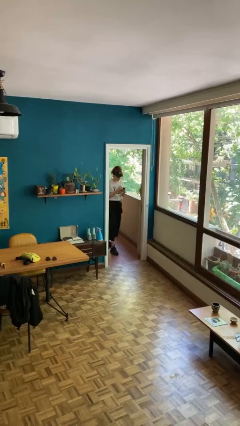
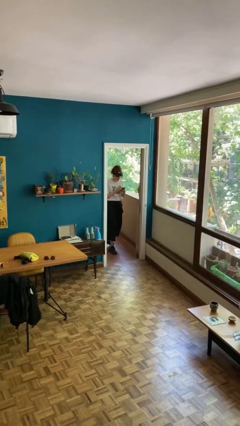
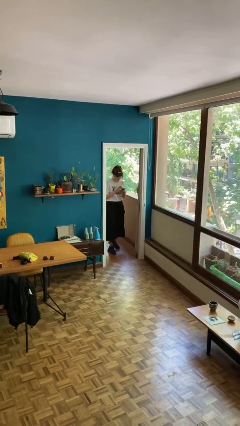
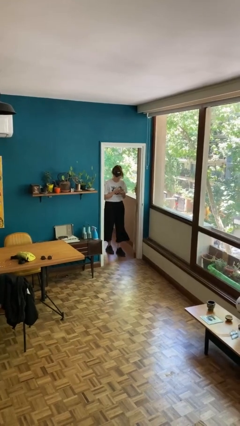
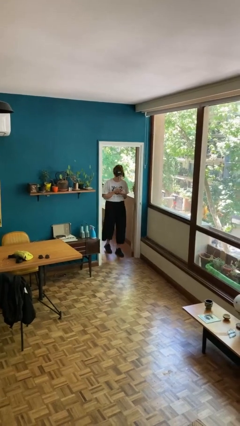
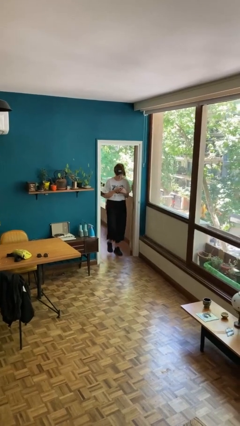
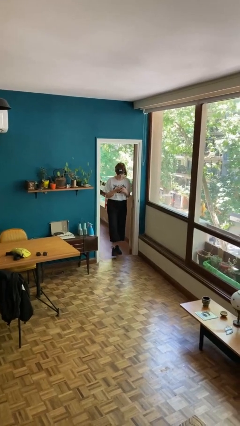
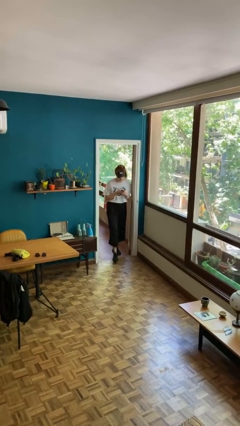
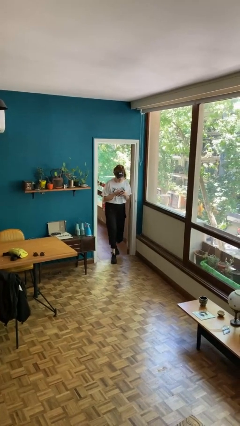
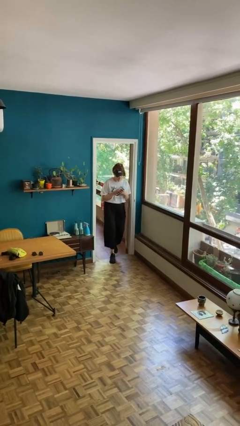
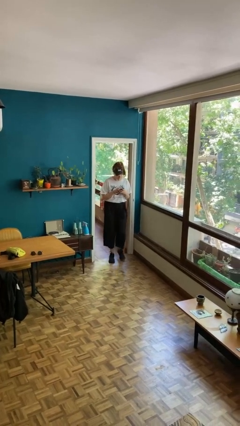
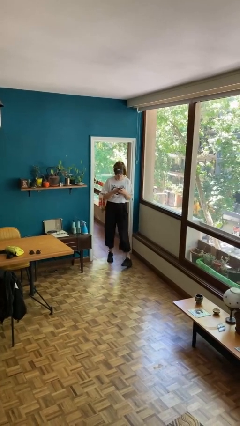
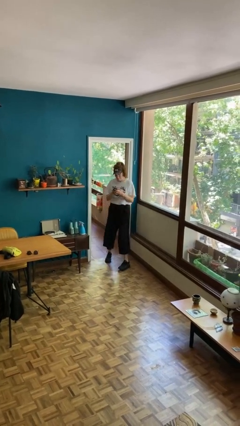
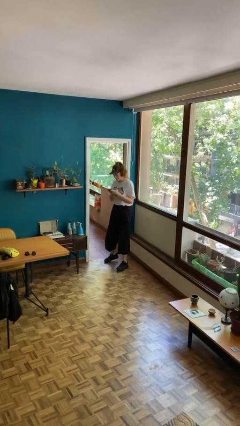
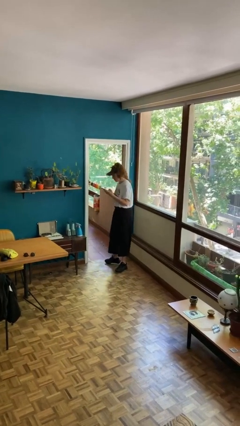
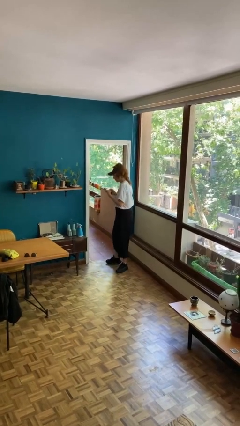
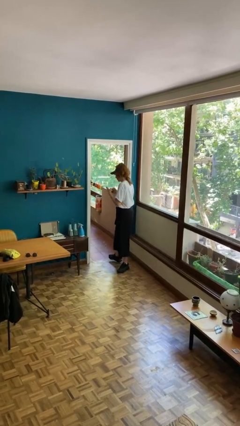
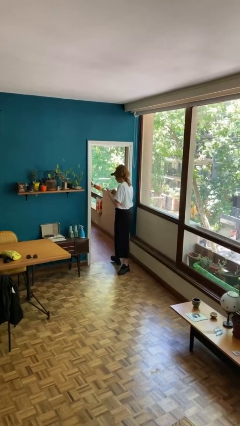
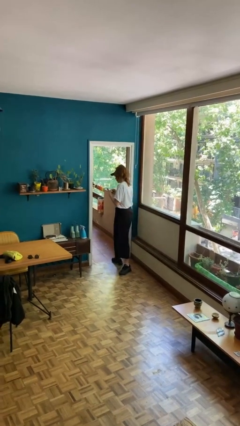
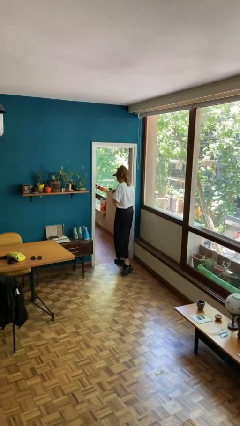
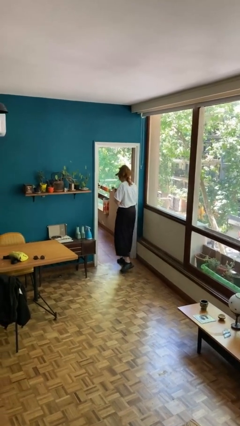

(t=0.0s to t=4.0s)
person enters scene through structure

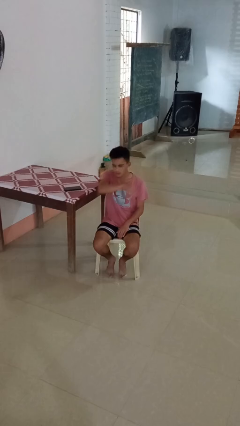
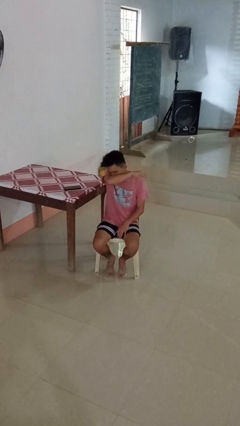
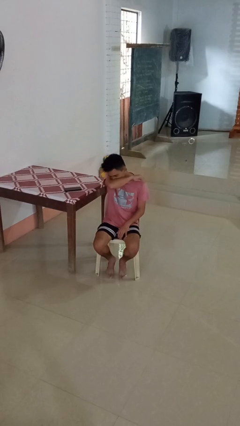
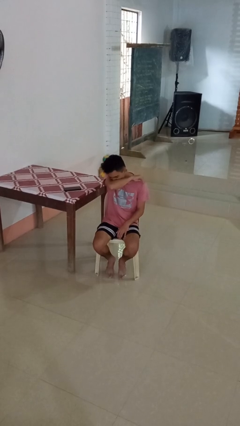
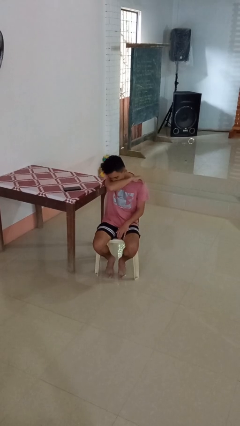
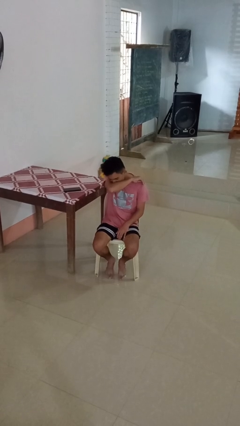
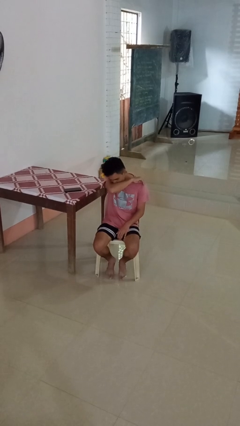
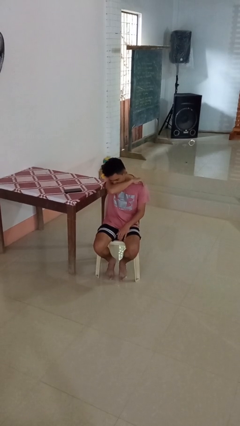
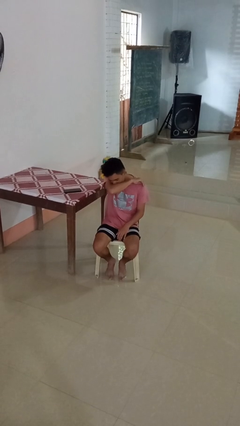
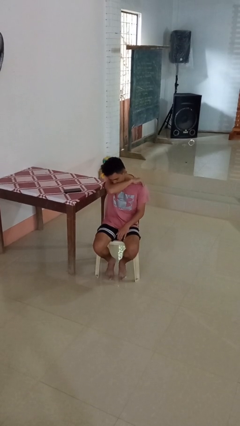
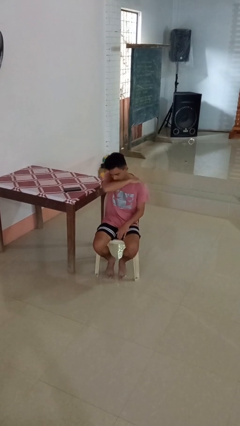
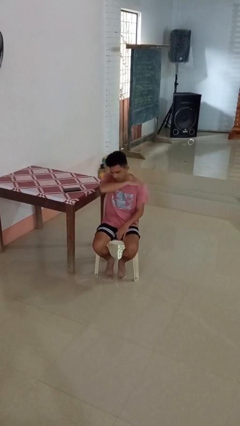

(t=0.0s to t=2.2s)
person sneezes into arm

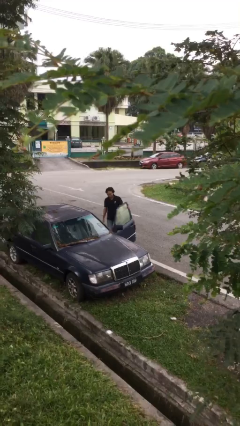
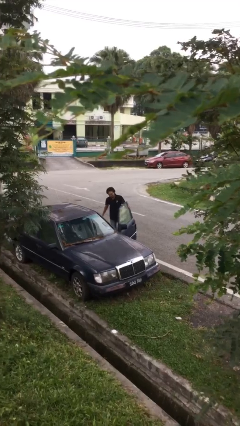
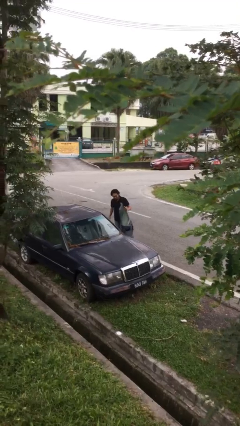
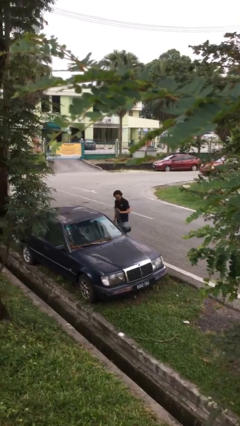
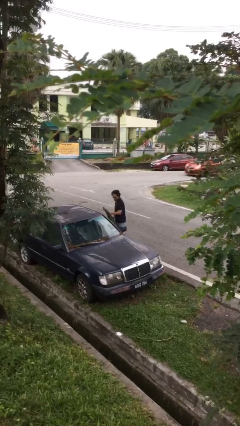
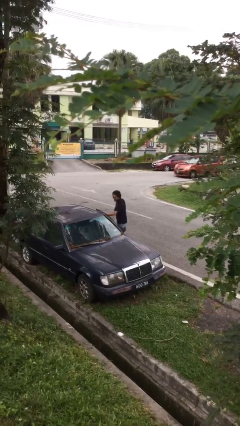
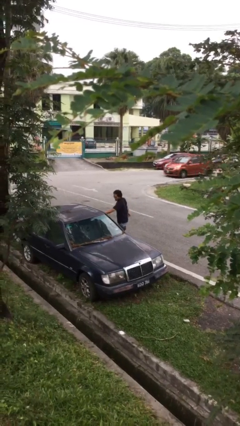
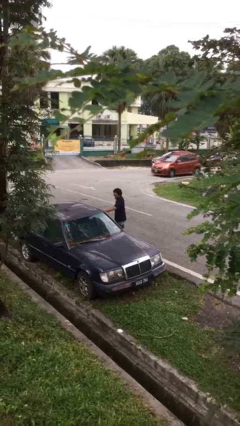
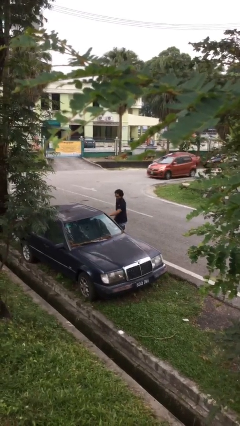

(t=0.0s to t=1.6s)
person closes car door

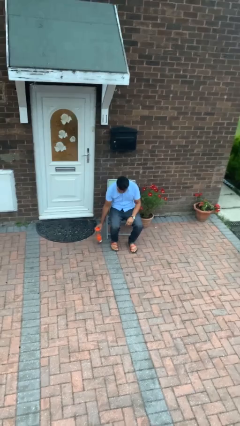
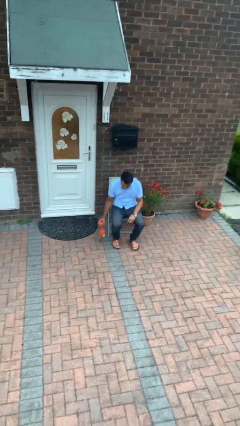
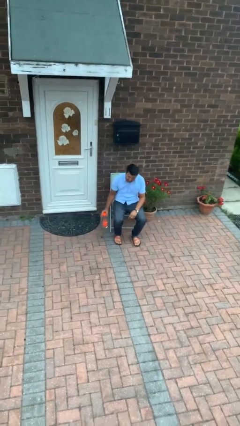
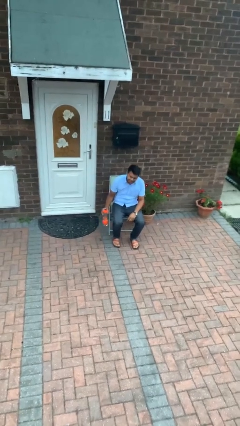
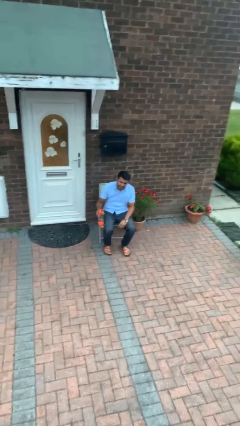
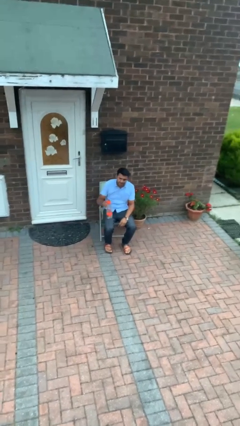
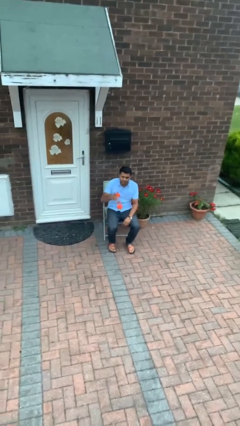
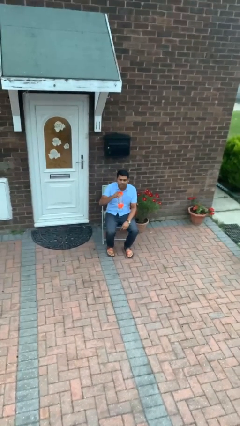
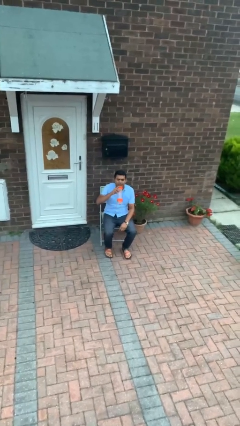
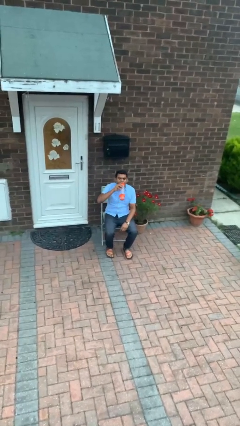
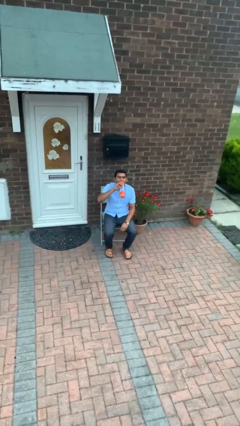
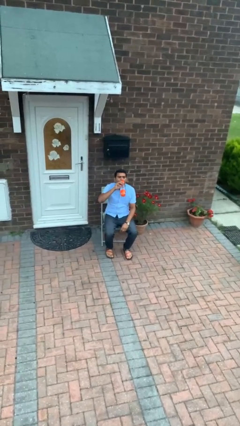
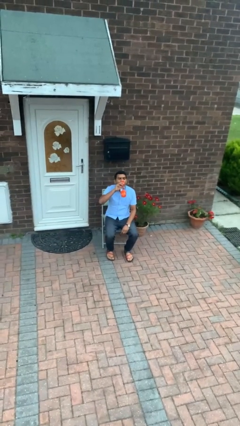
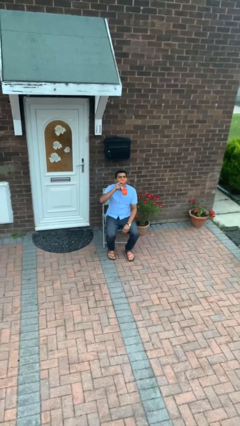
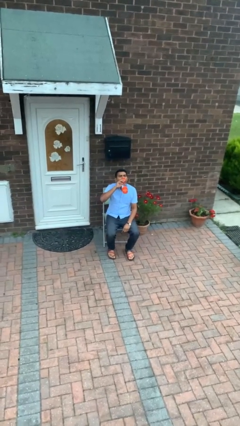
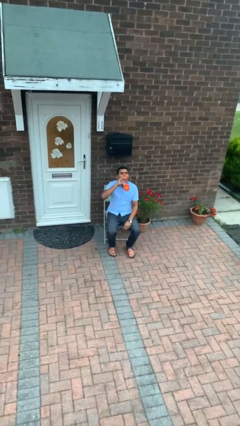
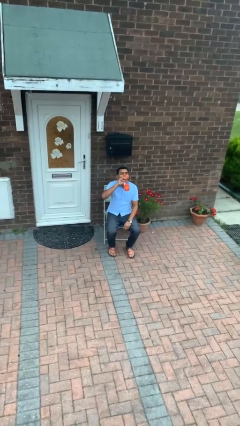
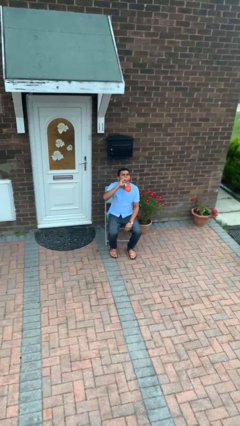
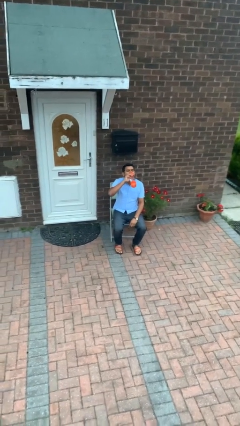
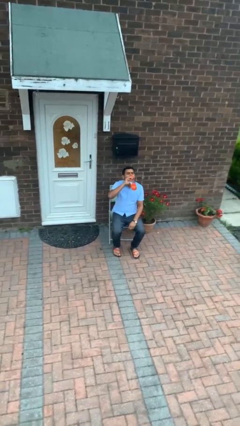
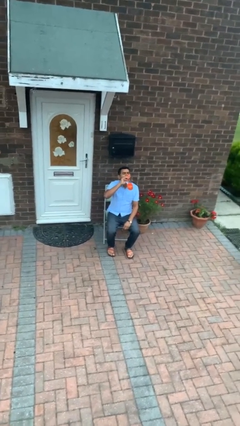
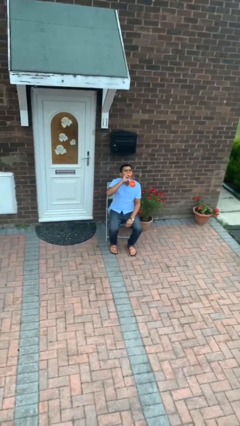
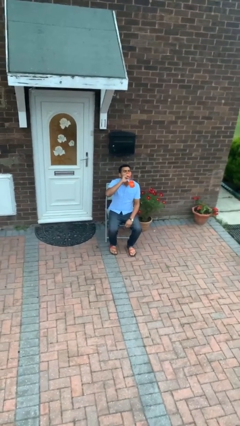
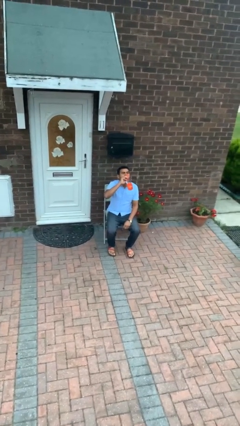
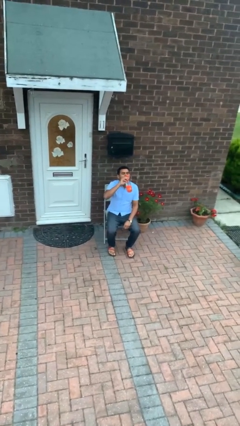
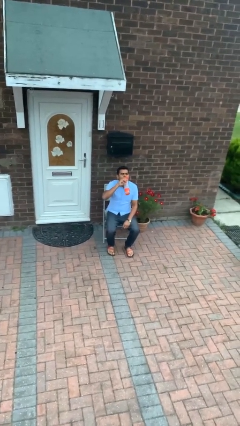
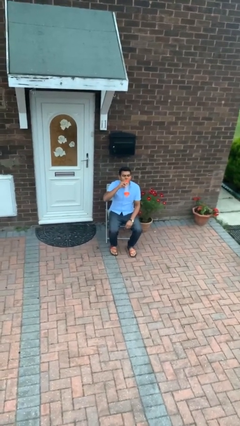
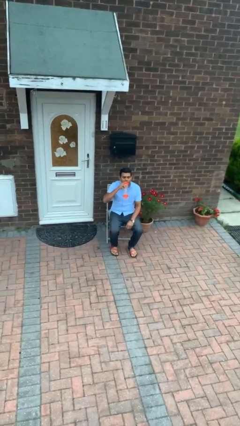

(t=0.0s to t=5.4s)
person drinks from bottle

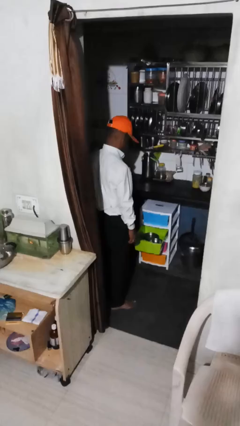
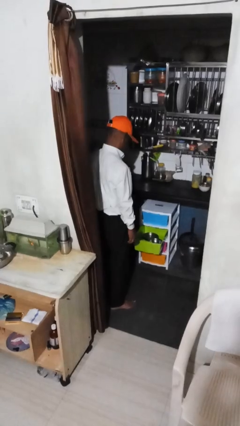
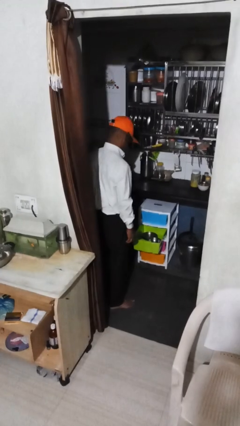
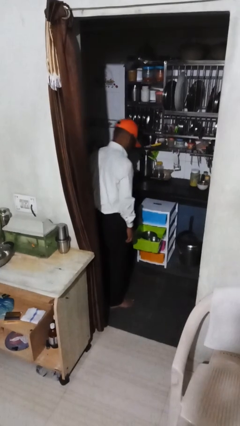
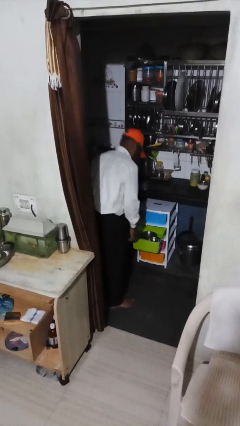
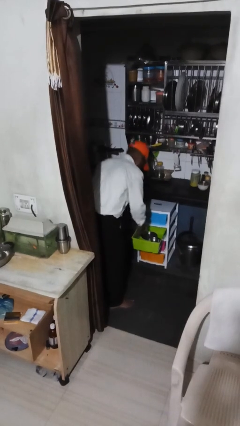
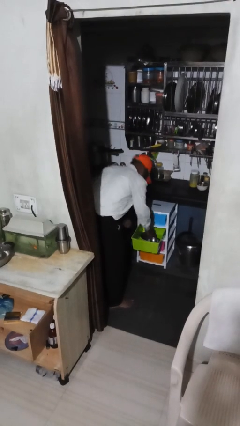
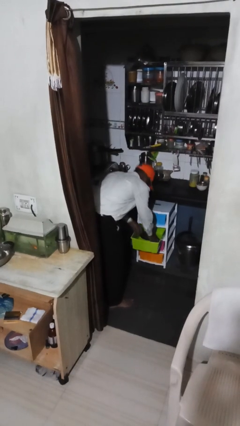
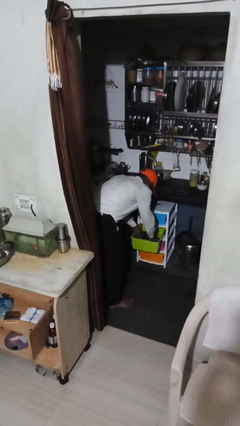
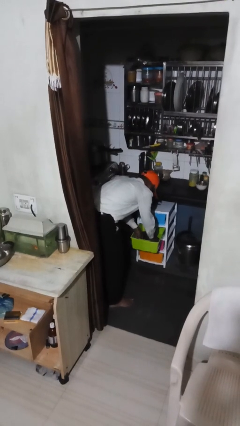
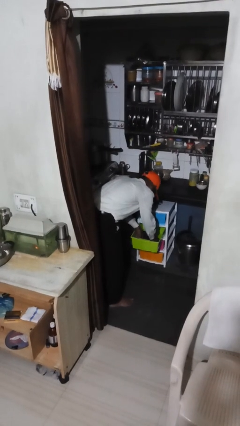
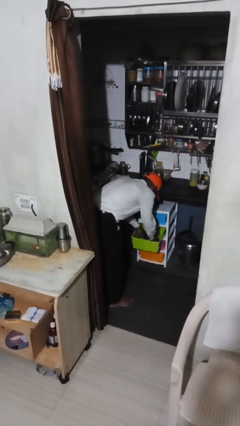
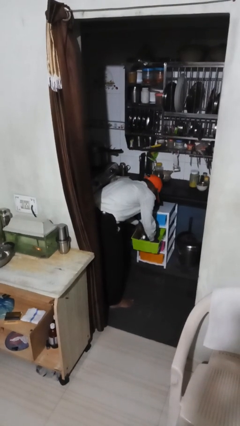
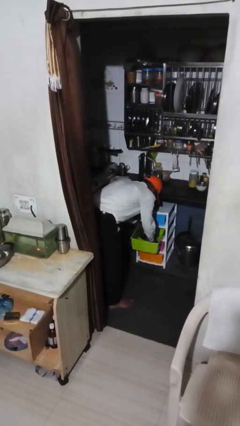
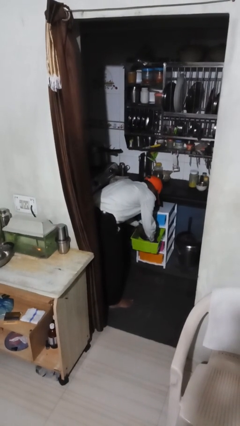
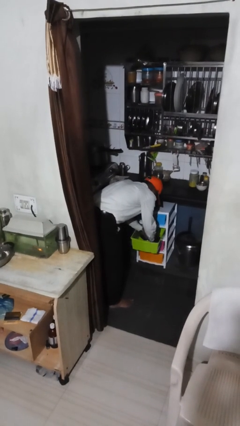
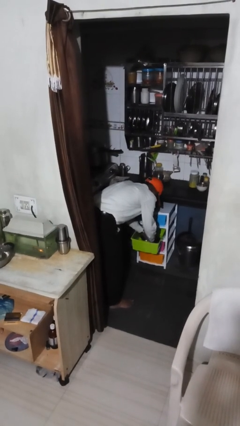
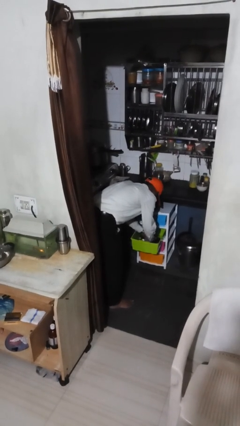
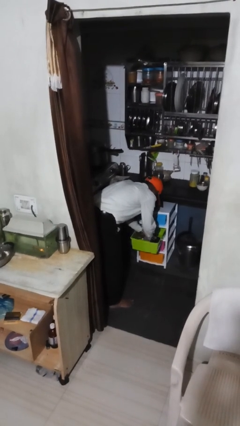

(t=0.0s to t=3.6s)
person searches in kitchen drawer

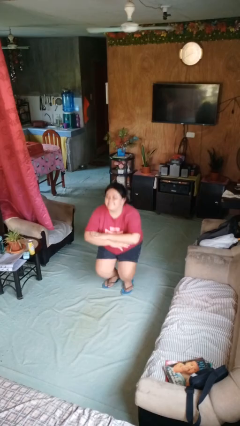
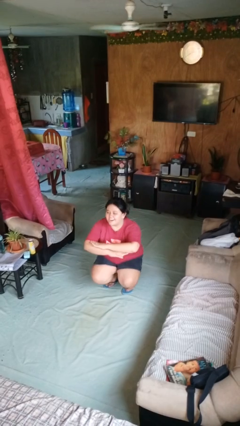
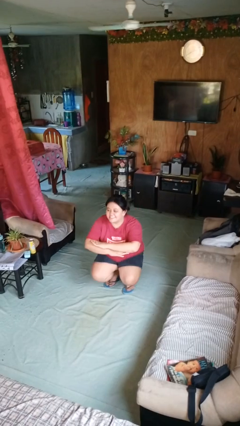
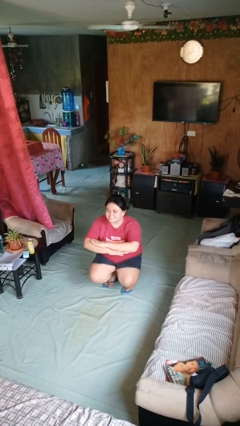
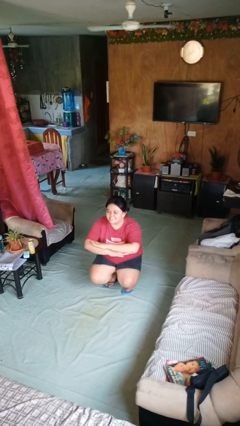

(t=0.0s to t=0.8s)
person squats
